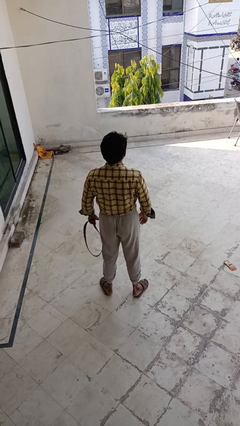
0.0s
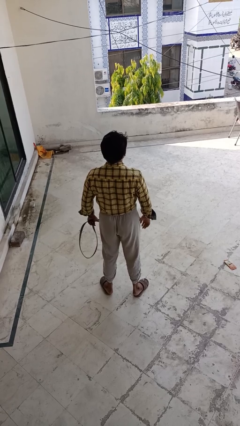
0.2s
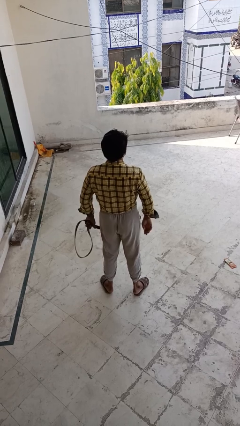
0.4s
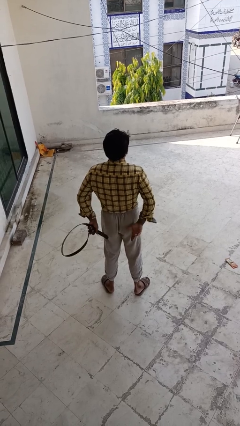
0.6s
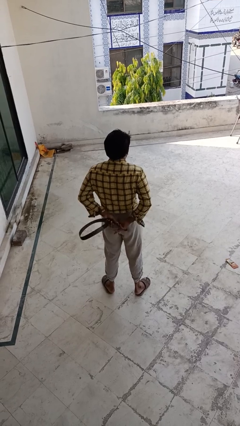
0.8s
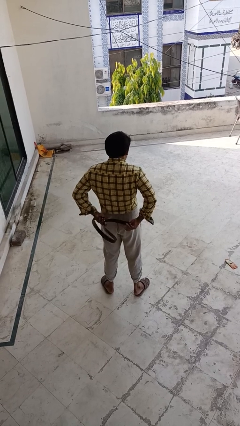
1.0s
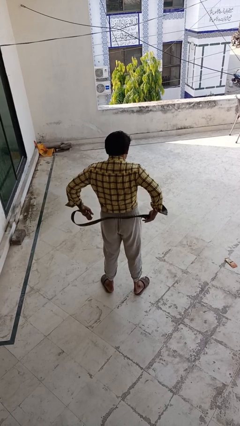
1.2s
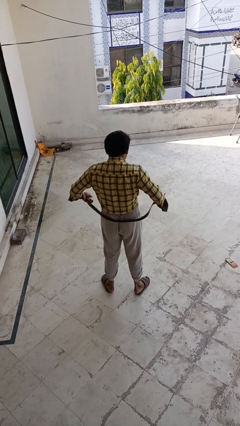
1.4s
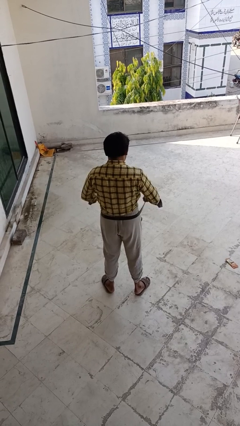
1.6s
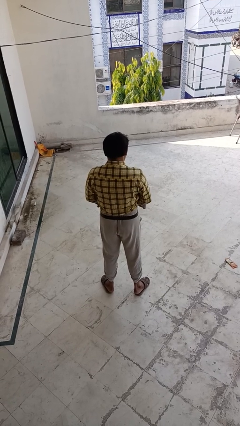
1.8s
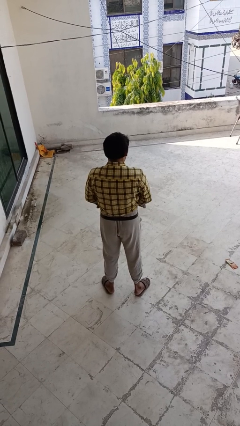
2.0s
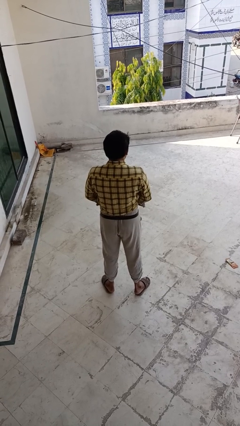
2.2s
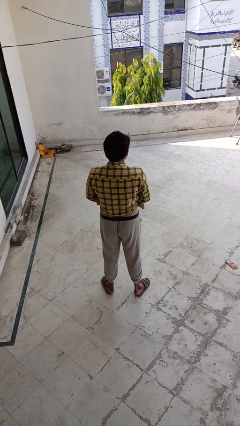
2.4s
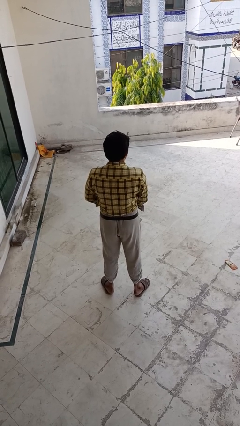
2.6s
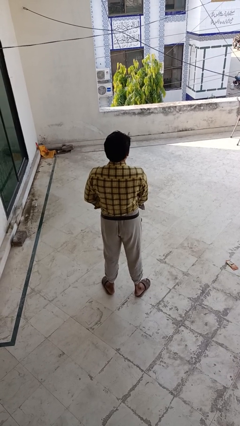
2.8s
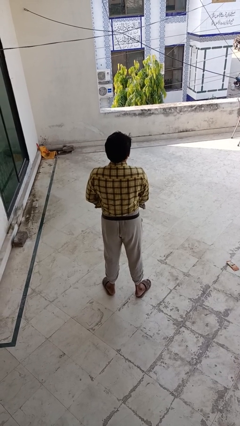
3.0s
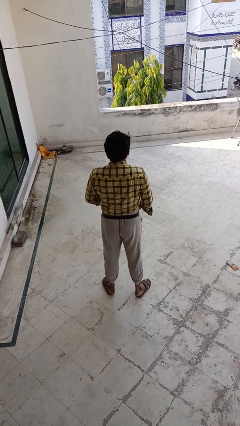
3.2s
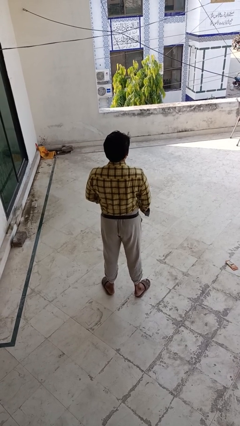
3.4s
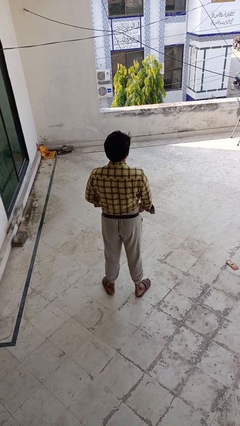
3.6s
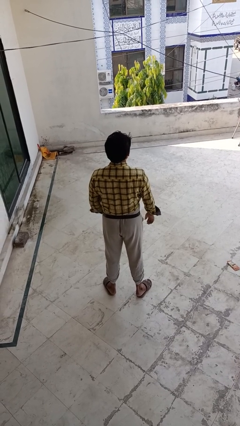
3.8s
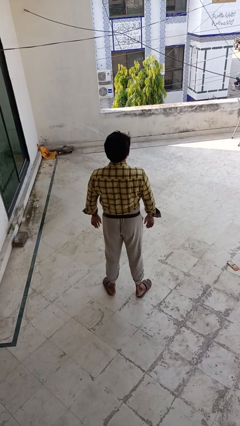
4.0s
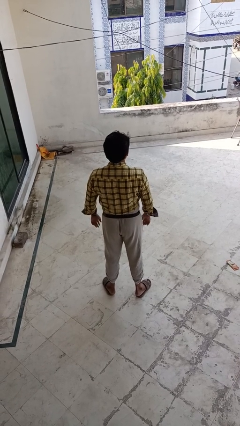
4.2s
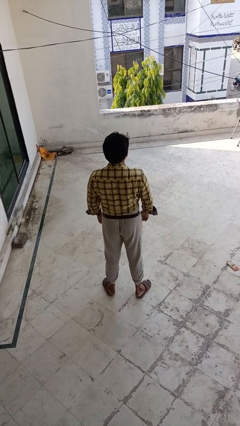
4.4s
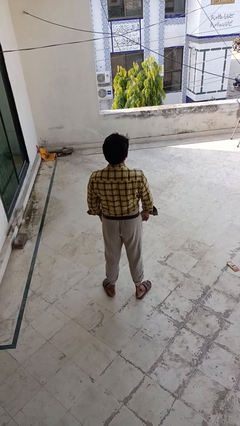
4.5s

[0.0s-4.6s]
person puts on belt

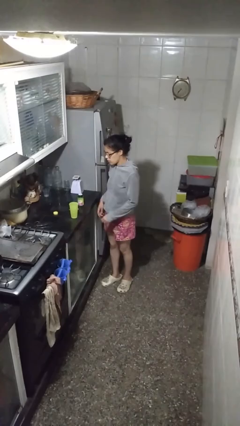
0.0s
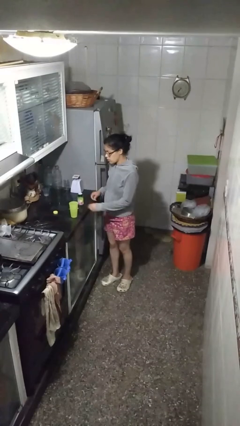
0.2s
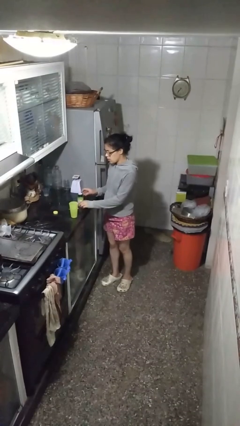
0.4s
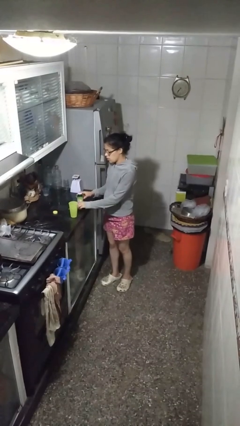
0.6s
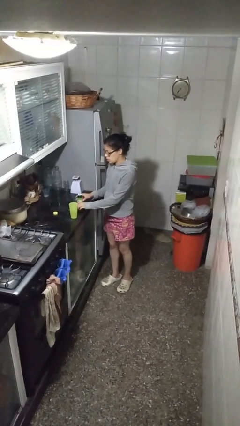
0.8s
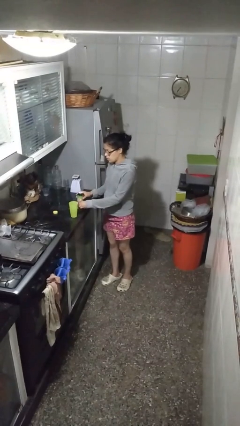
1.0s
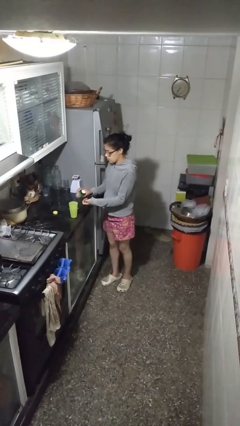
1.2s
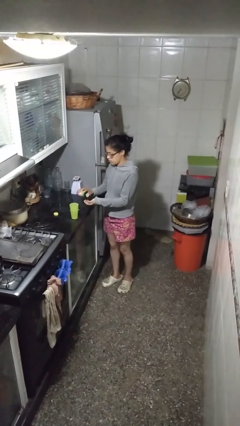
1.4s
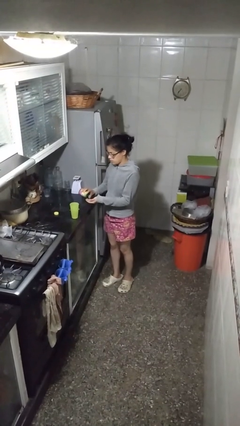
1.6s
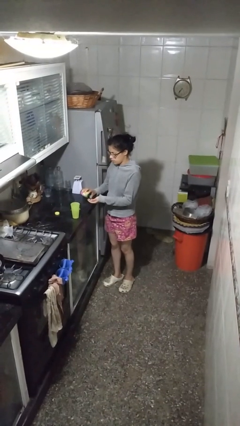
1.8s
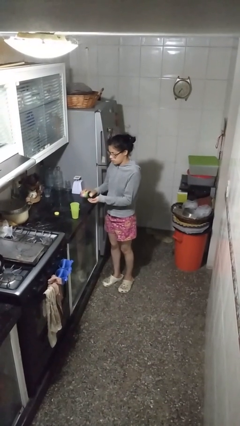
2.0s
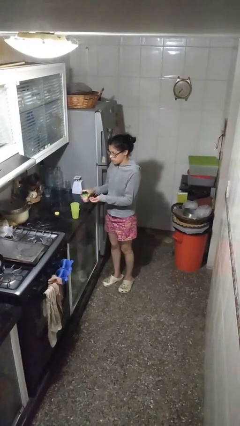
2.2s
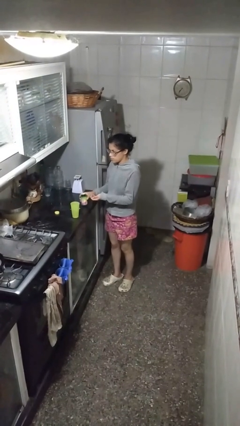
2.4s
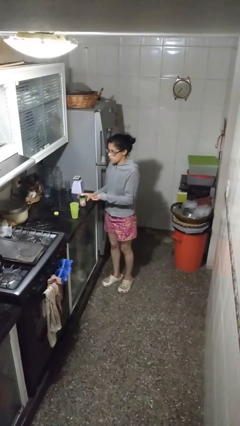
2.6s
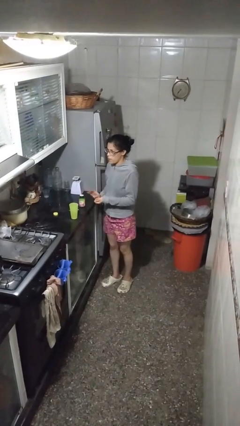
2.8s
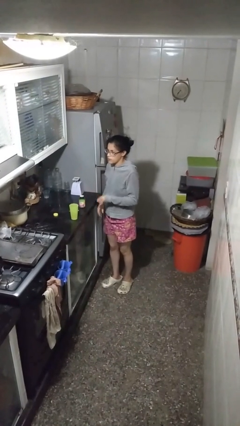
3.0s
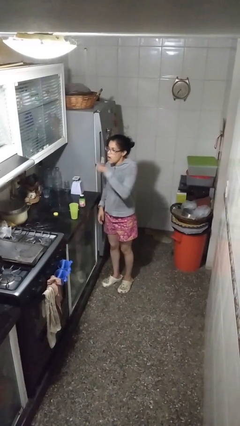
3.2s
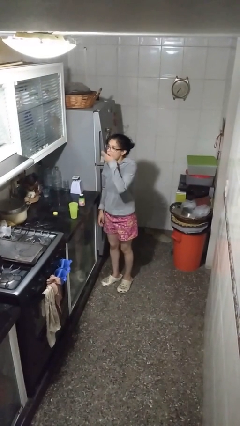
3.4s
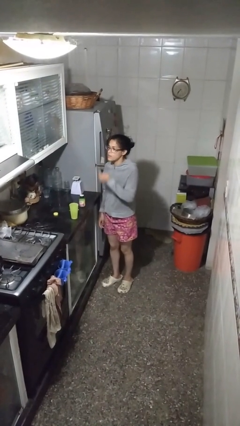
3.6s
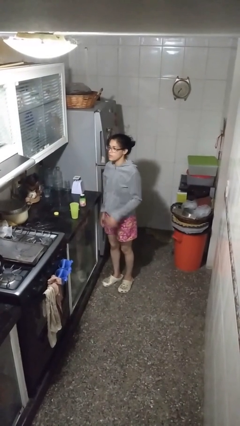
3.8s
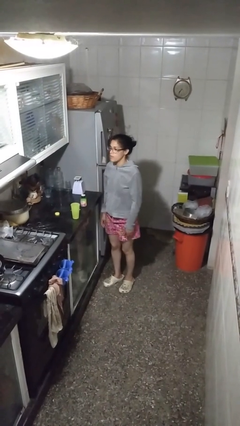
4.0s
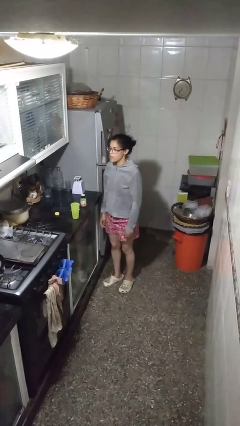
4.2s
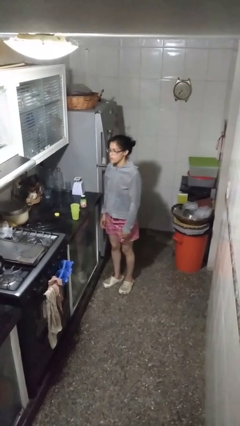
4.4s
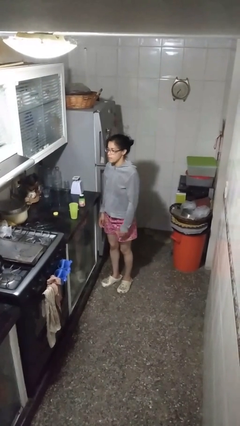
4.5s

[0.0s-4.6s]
person takes medicine pills

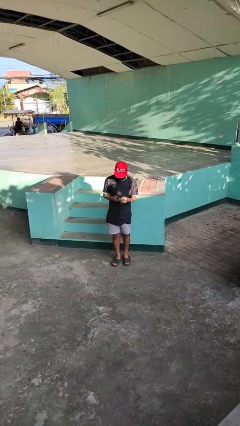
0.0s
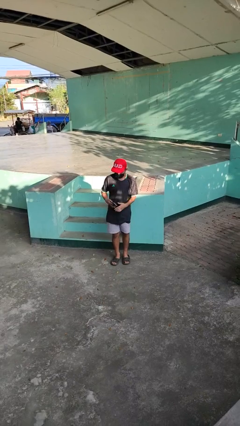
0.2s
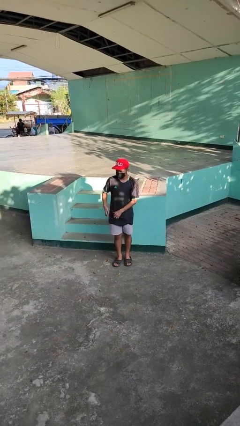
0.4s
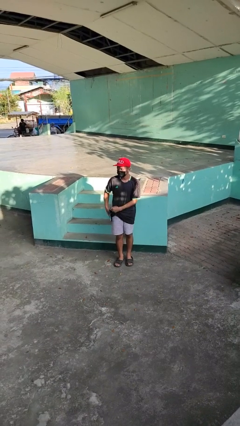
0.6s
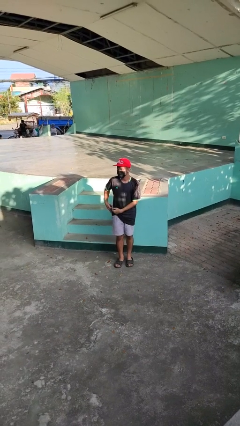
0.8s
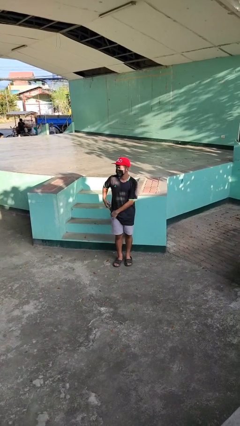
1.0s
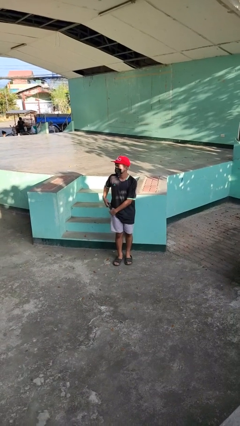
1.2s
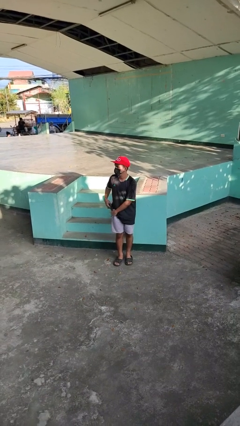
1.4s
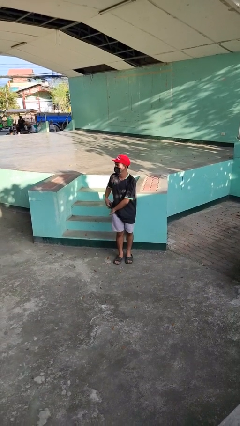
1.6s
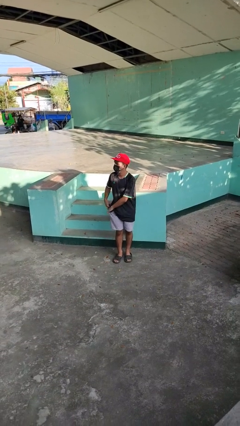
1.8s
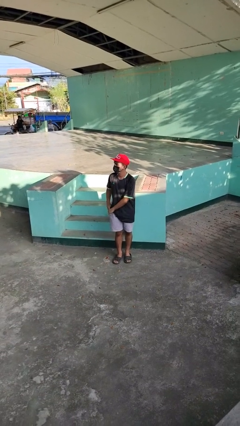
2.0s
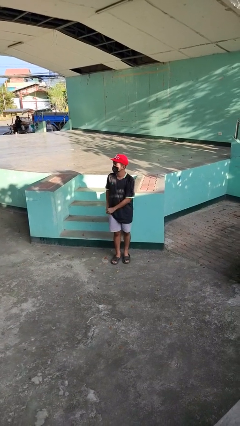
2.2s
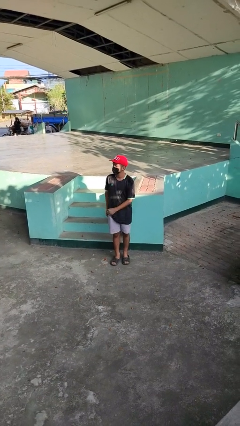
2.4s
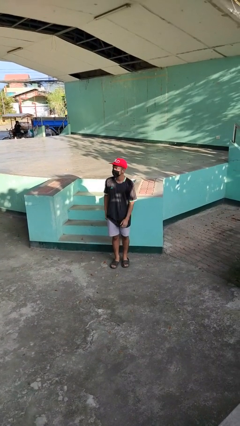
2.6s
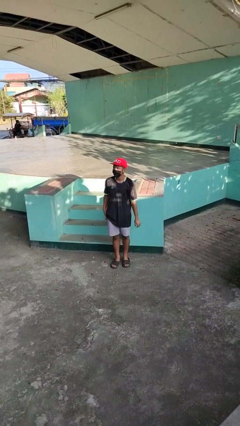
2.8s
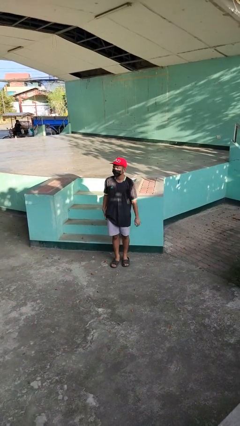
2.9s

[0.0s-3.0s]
person puts phone into pocket

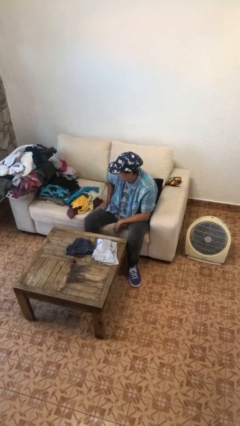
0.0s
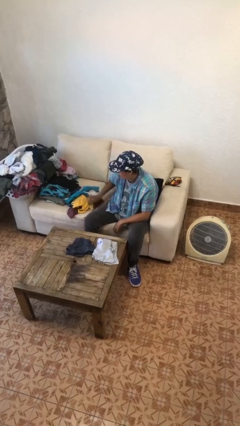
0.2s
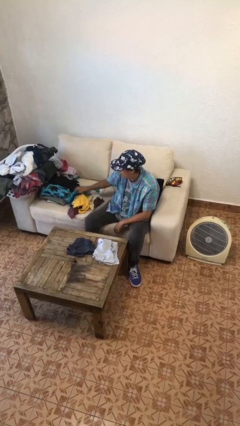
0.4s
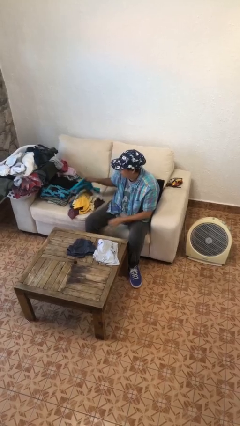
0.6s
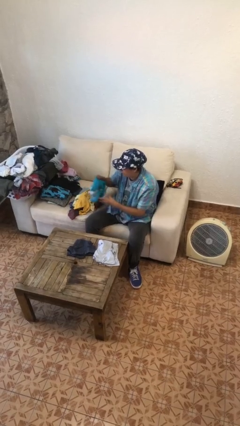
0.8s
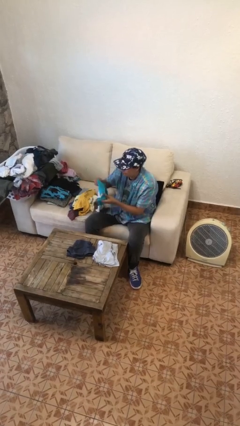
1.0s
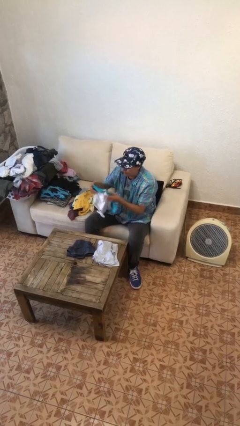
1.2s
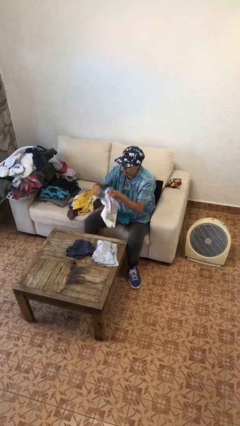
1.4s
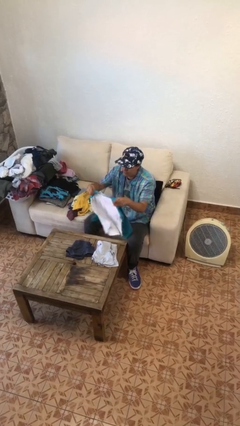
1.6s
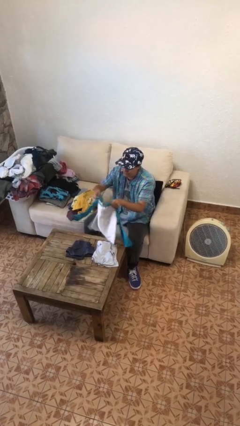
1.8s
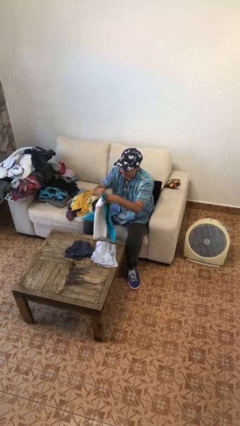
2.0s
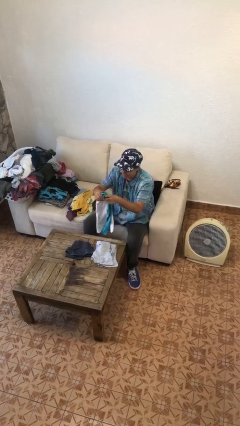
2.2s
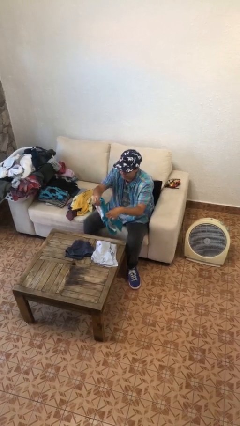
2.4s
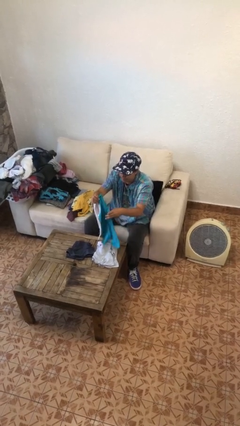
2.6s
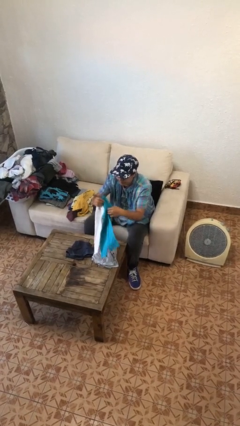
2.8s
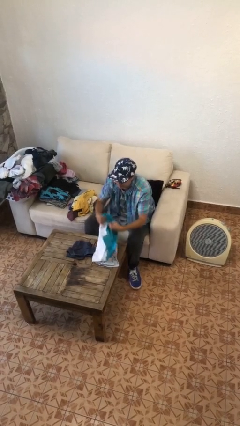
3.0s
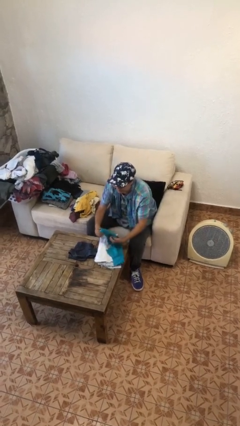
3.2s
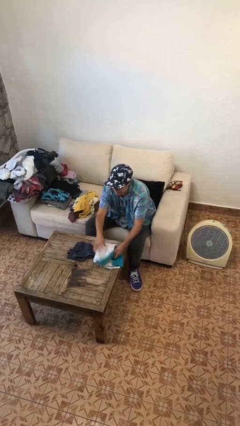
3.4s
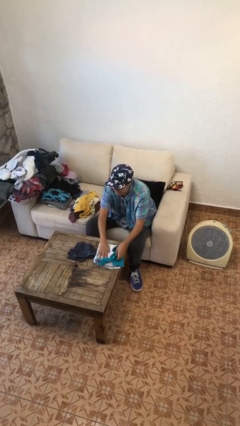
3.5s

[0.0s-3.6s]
person folds shirt

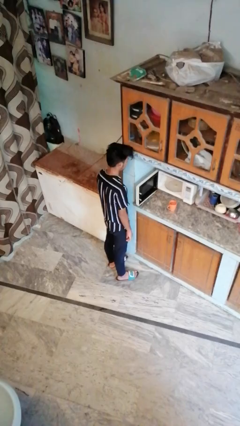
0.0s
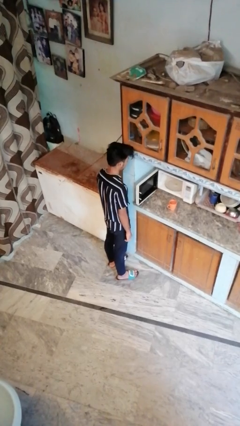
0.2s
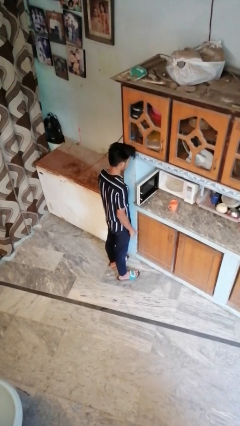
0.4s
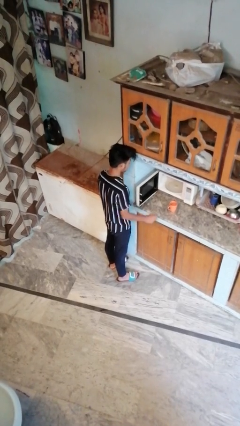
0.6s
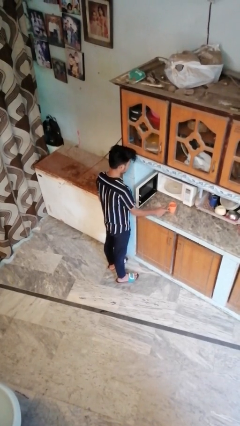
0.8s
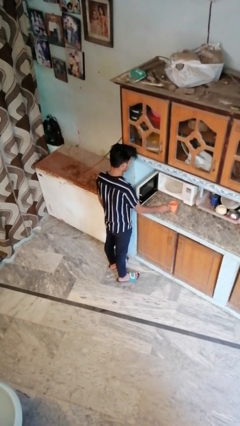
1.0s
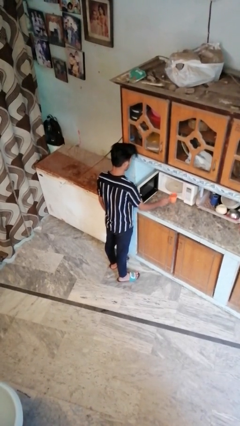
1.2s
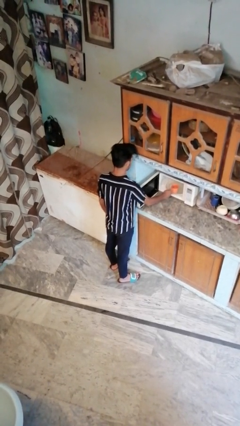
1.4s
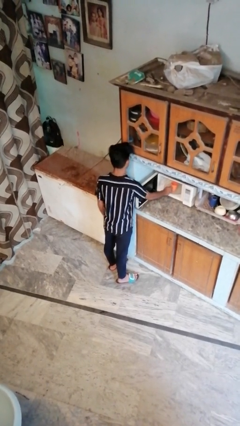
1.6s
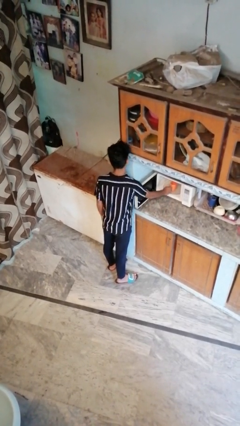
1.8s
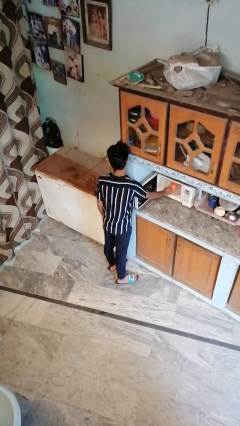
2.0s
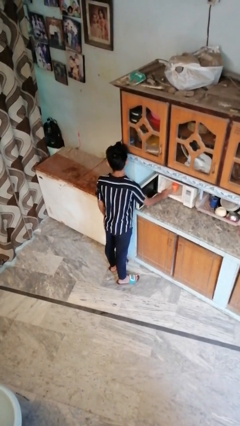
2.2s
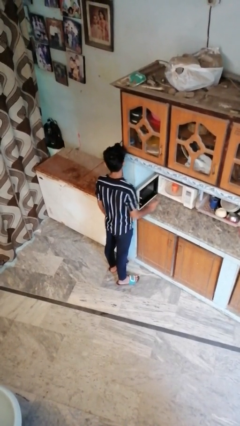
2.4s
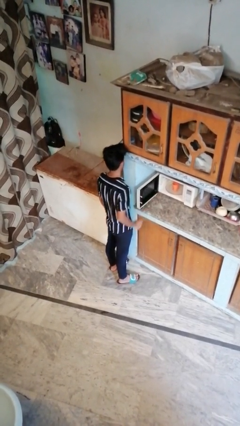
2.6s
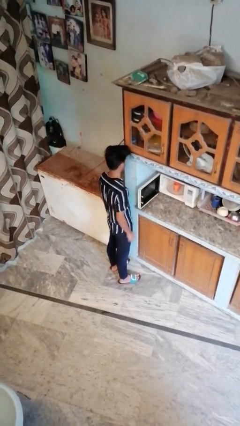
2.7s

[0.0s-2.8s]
person puts object into microwave
